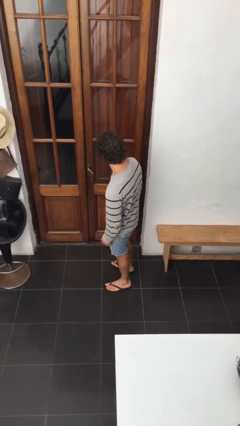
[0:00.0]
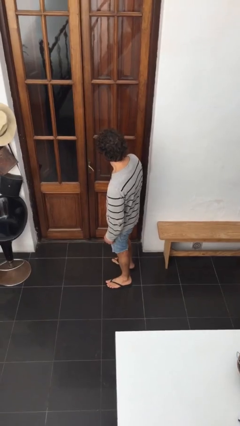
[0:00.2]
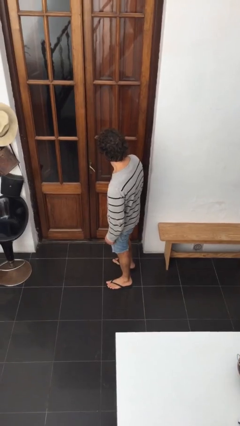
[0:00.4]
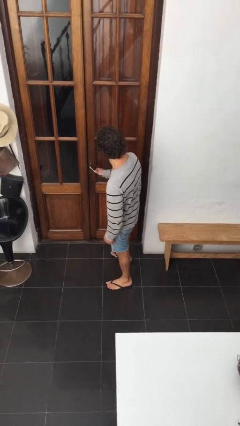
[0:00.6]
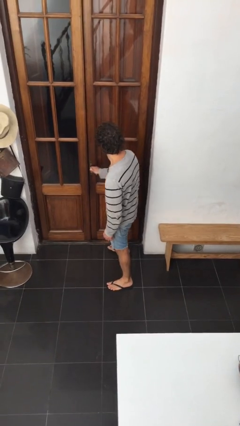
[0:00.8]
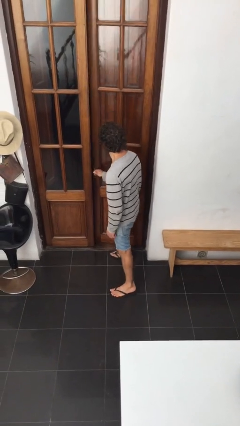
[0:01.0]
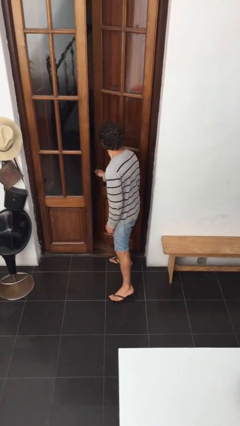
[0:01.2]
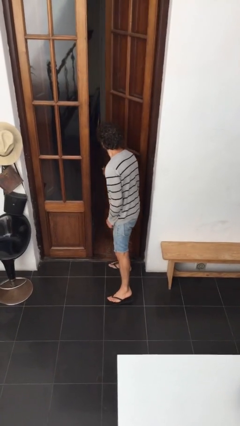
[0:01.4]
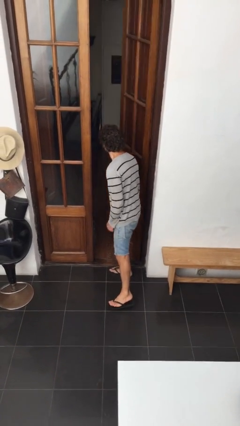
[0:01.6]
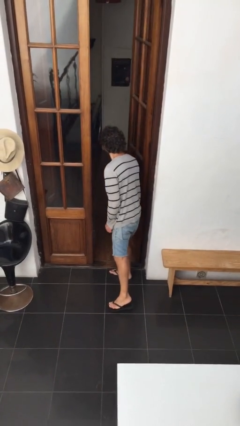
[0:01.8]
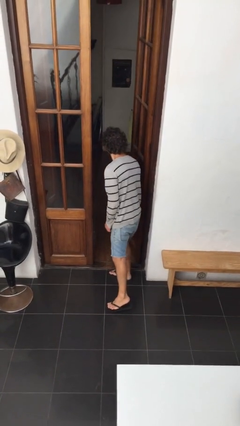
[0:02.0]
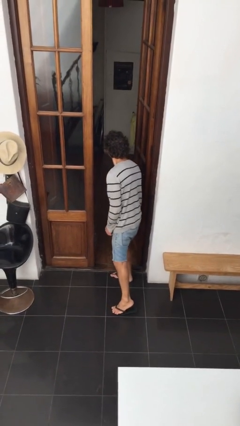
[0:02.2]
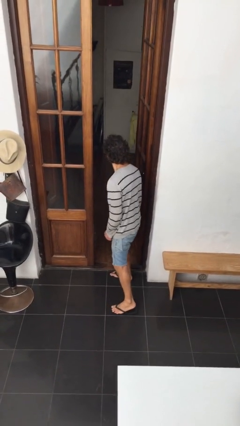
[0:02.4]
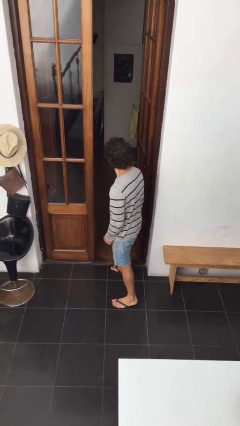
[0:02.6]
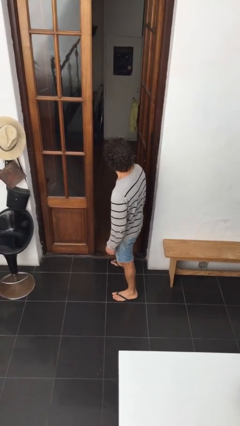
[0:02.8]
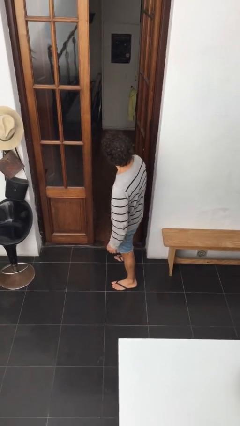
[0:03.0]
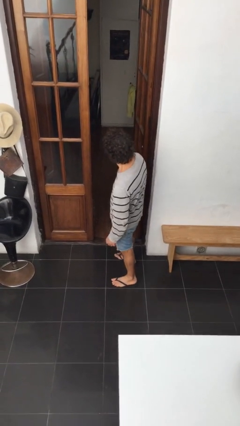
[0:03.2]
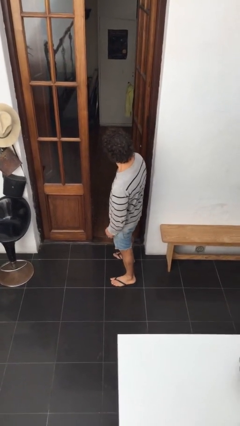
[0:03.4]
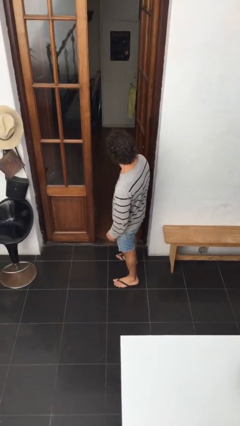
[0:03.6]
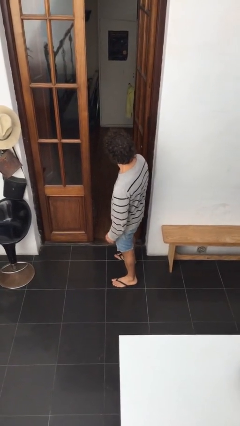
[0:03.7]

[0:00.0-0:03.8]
person opens facility door

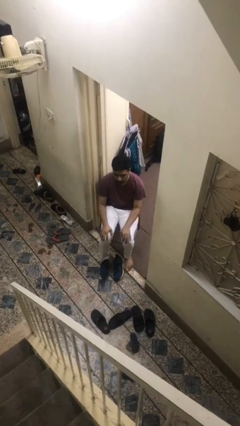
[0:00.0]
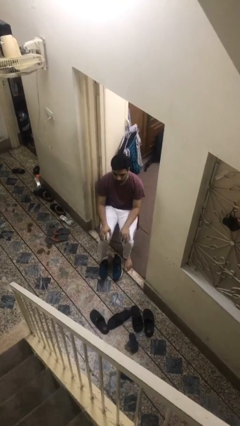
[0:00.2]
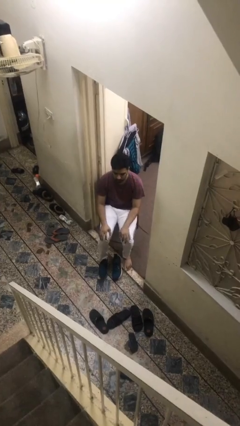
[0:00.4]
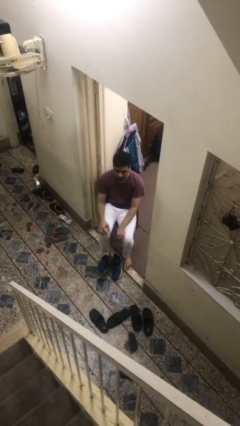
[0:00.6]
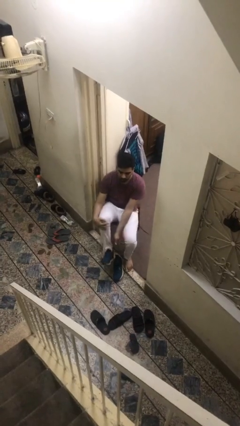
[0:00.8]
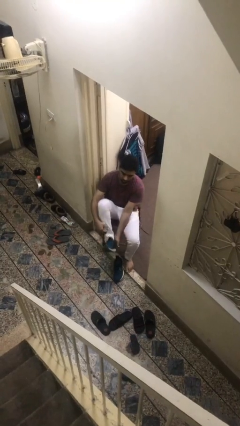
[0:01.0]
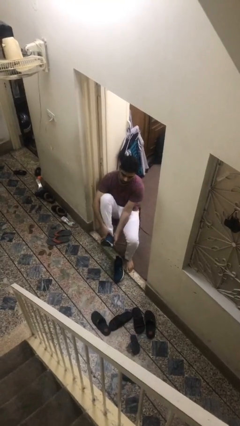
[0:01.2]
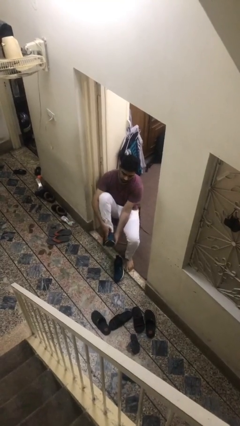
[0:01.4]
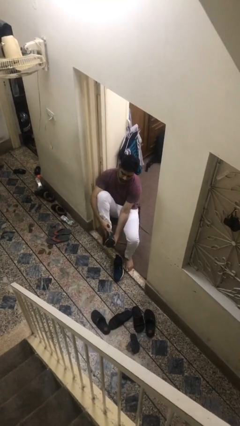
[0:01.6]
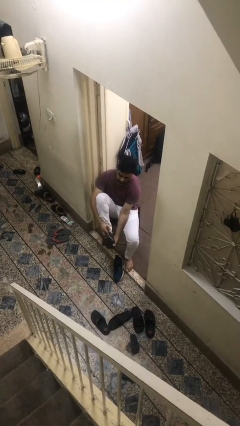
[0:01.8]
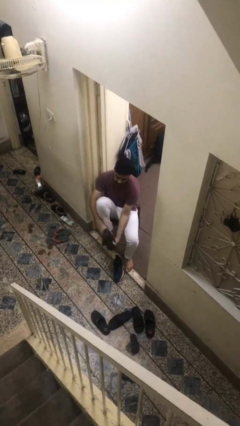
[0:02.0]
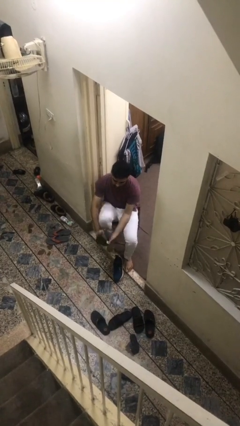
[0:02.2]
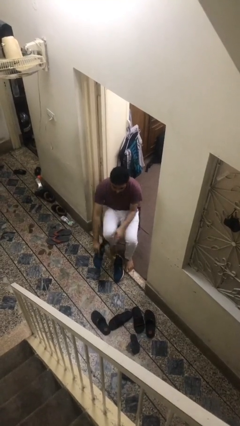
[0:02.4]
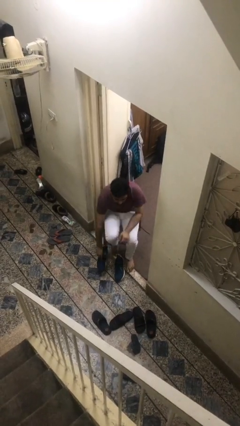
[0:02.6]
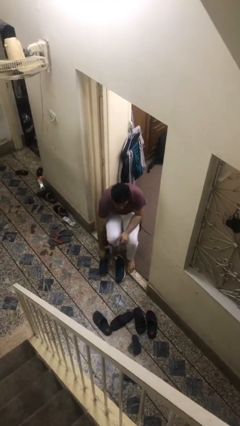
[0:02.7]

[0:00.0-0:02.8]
person takes off shoes

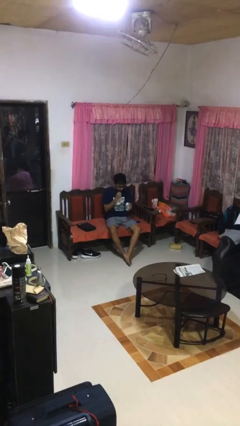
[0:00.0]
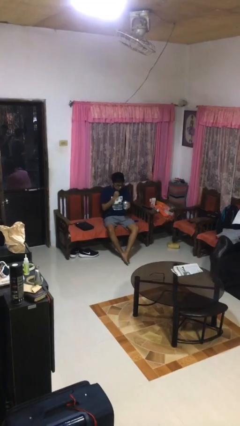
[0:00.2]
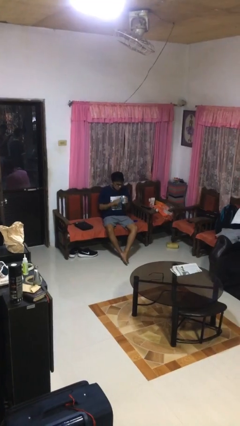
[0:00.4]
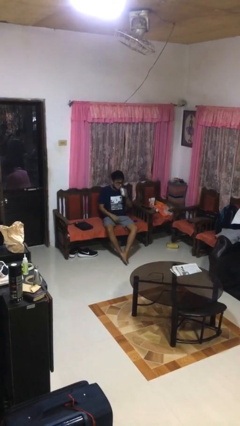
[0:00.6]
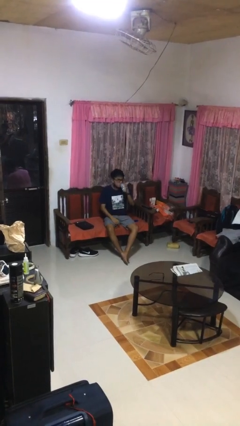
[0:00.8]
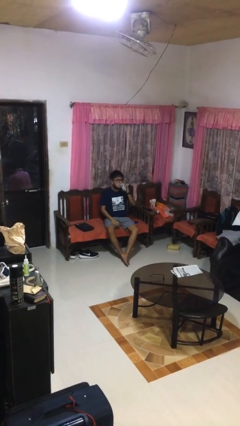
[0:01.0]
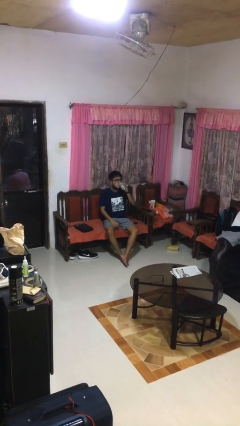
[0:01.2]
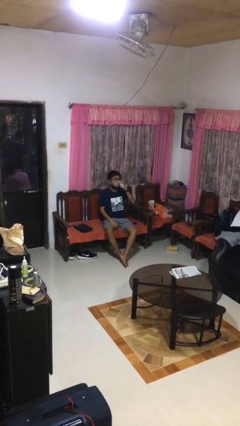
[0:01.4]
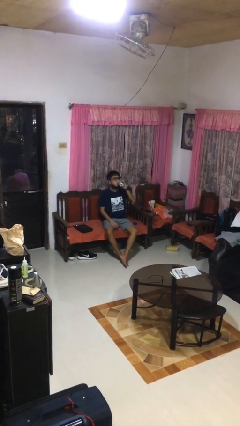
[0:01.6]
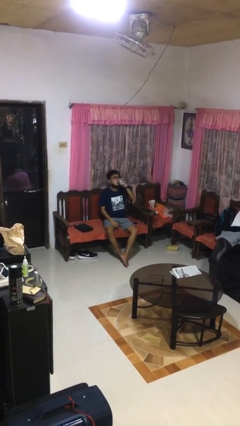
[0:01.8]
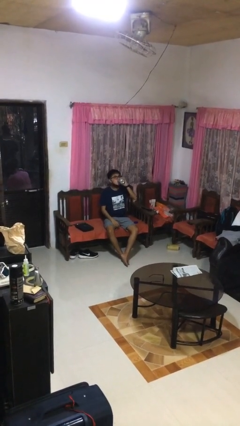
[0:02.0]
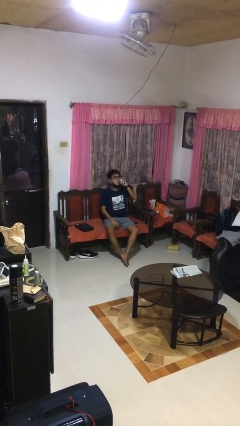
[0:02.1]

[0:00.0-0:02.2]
person drinks from beverage can

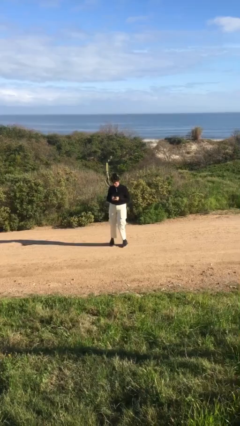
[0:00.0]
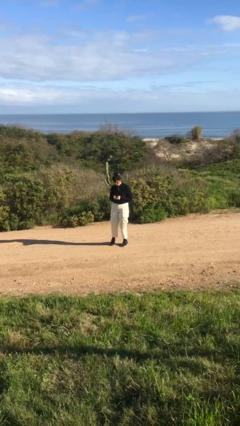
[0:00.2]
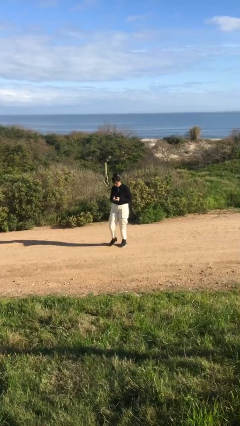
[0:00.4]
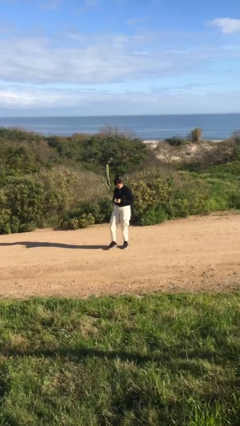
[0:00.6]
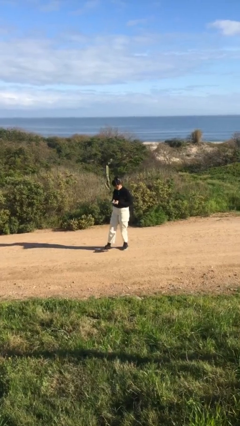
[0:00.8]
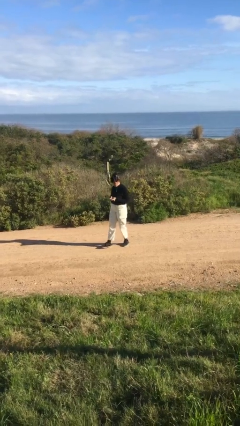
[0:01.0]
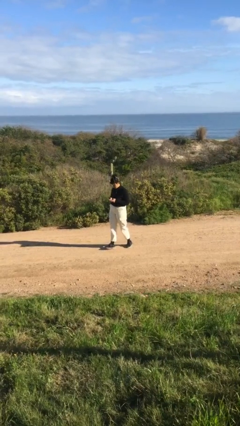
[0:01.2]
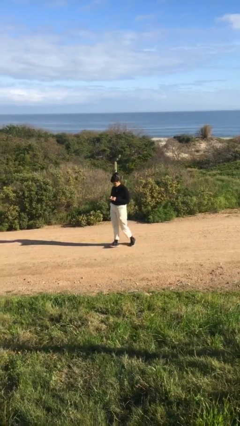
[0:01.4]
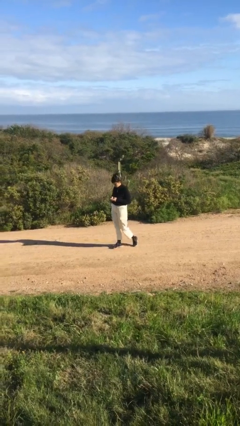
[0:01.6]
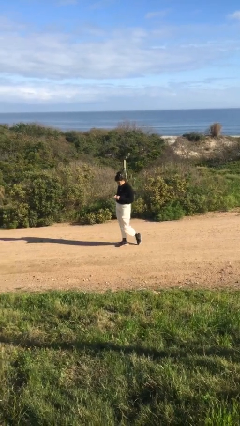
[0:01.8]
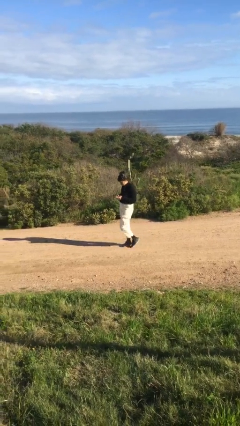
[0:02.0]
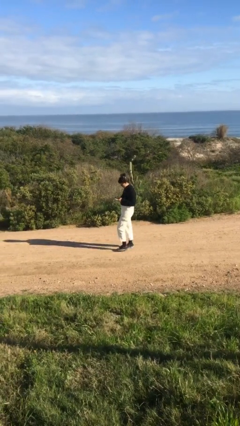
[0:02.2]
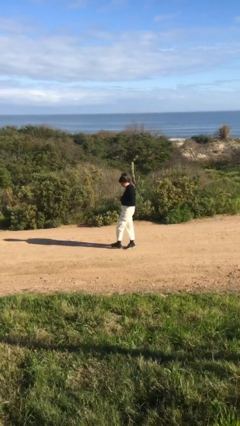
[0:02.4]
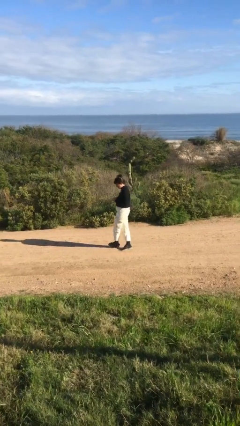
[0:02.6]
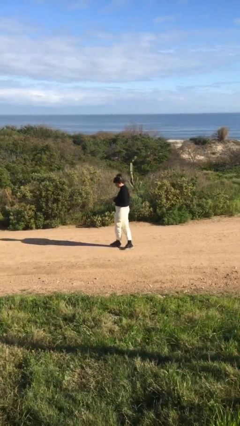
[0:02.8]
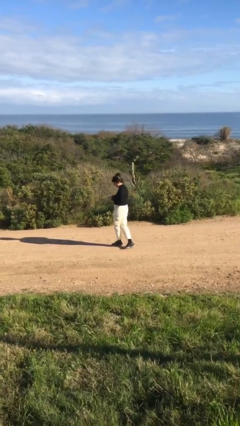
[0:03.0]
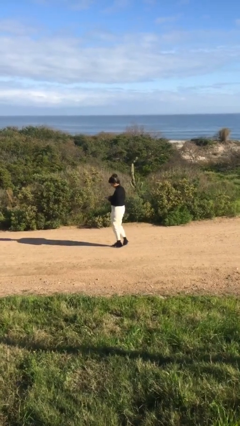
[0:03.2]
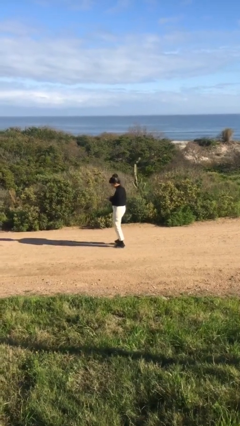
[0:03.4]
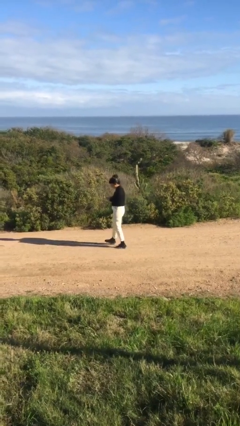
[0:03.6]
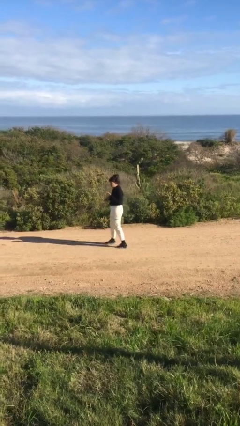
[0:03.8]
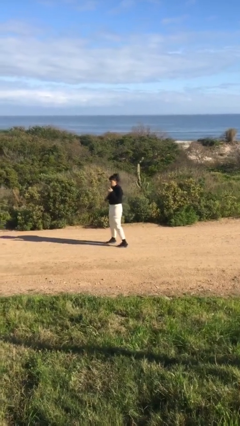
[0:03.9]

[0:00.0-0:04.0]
person texts on phone

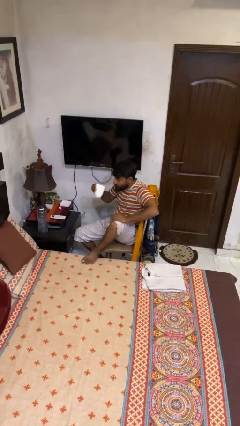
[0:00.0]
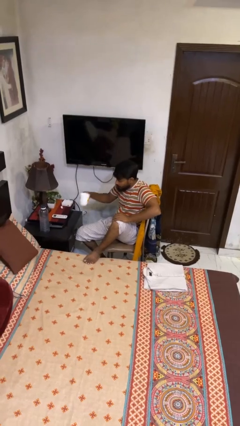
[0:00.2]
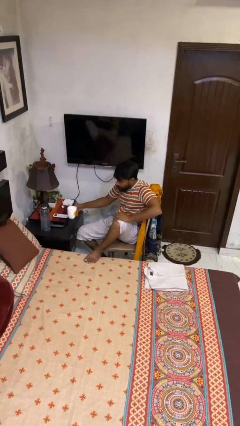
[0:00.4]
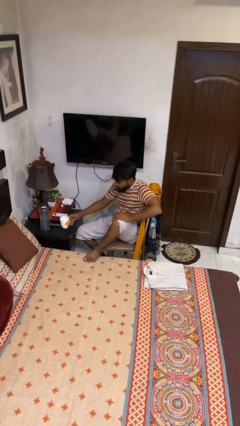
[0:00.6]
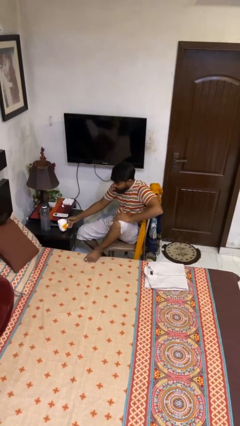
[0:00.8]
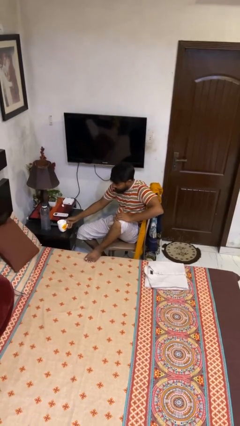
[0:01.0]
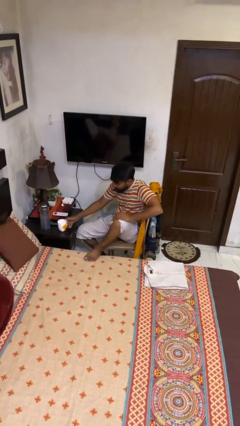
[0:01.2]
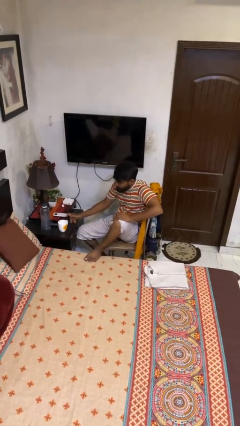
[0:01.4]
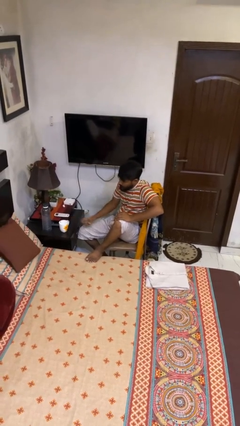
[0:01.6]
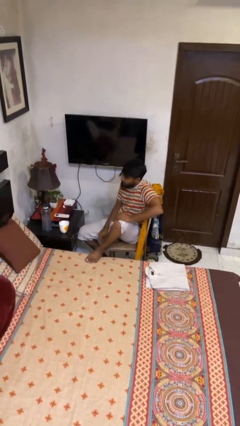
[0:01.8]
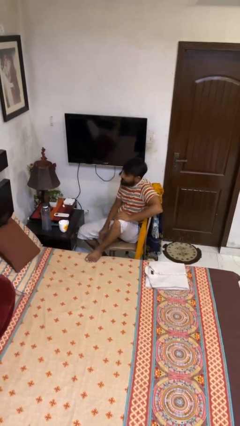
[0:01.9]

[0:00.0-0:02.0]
person puts down object on table

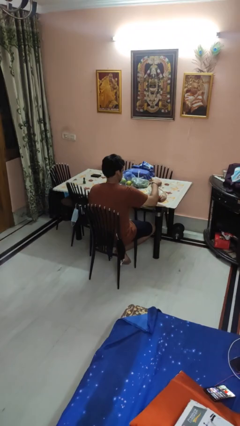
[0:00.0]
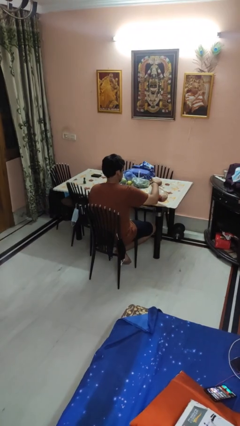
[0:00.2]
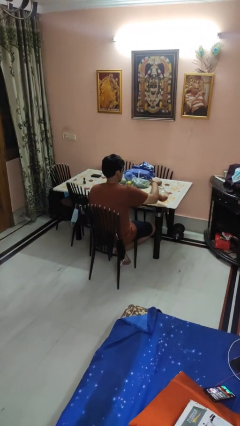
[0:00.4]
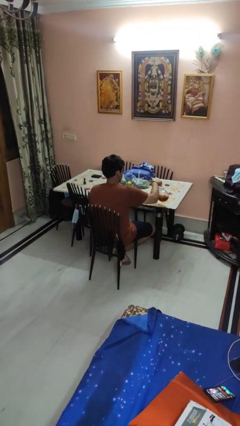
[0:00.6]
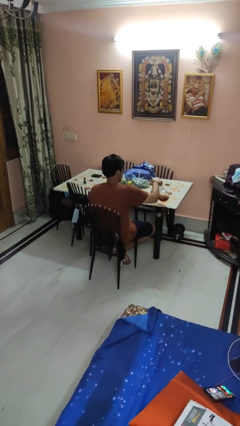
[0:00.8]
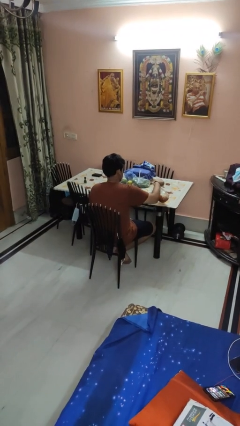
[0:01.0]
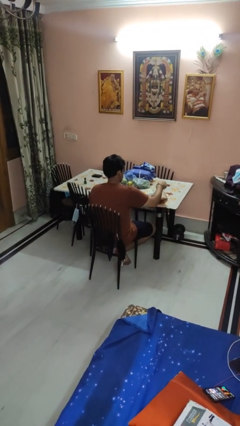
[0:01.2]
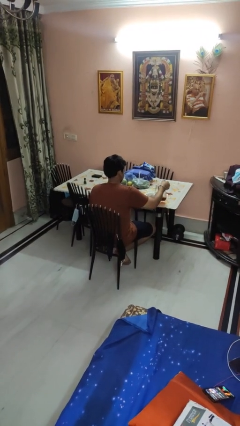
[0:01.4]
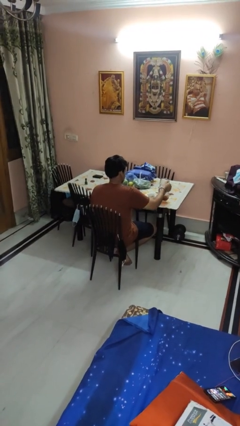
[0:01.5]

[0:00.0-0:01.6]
person pours coffee into mug

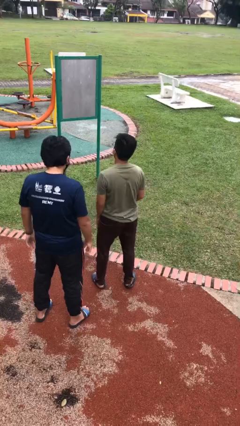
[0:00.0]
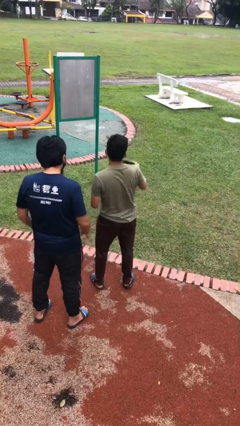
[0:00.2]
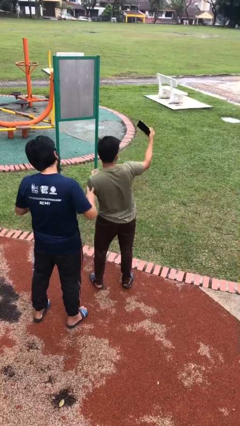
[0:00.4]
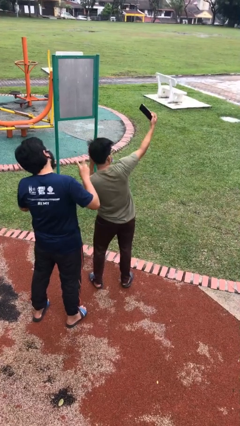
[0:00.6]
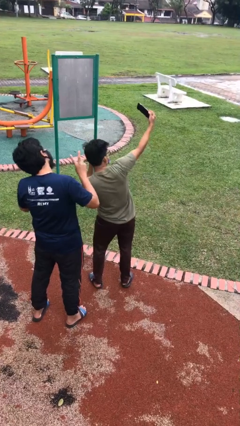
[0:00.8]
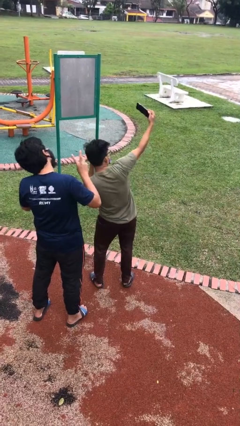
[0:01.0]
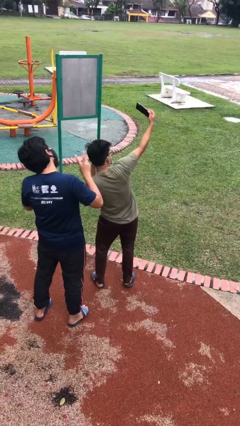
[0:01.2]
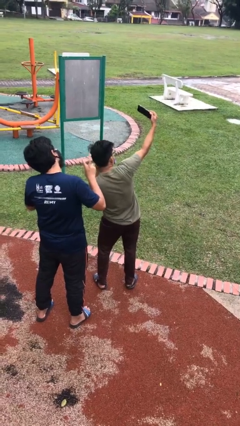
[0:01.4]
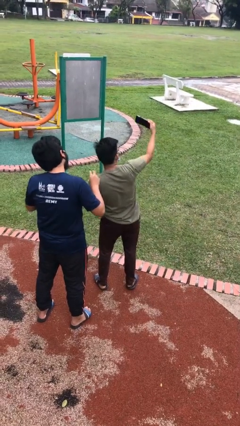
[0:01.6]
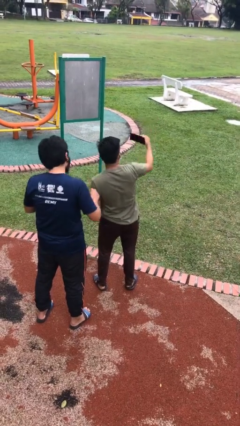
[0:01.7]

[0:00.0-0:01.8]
person takes selfie with person
